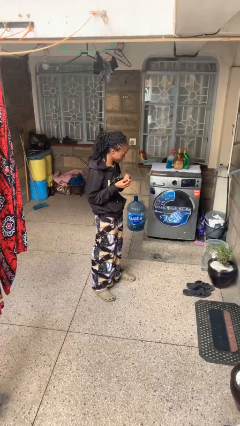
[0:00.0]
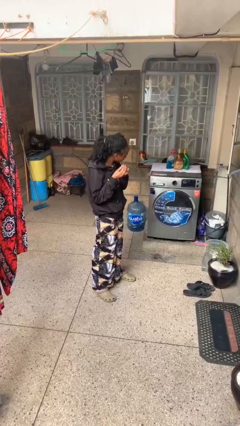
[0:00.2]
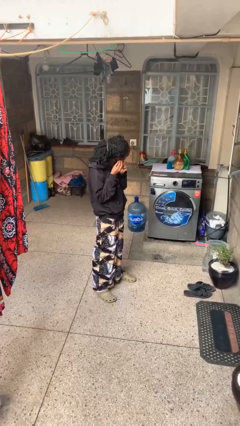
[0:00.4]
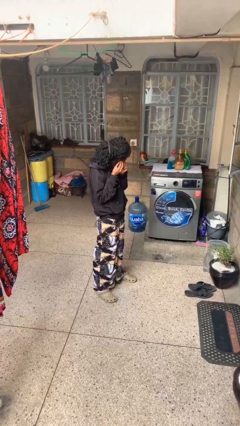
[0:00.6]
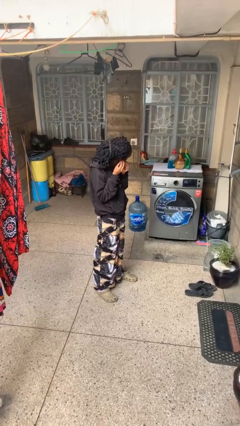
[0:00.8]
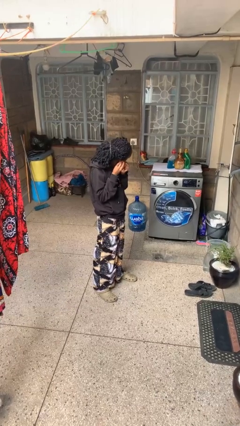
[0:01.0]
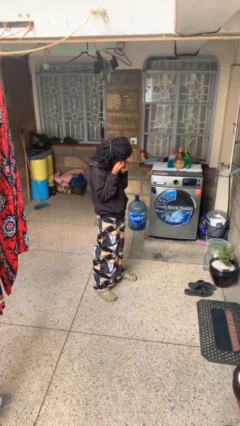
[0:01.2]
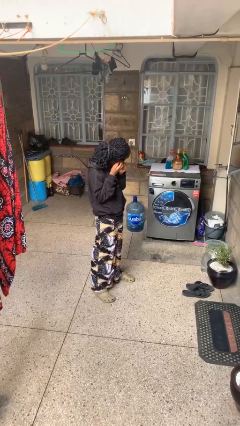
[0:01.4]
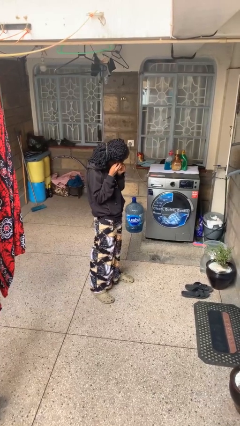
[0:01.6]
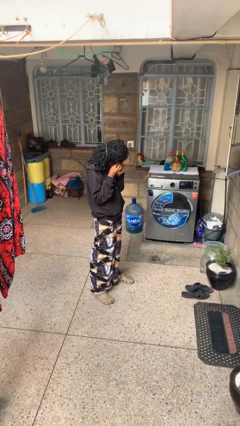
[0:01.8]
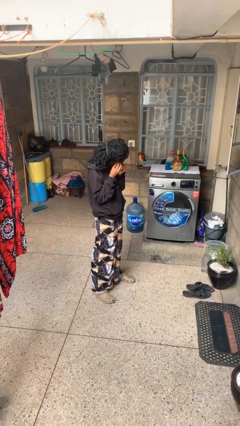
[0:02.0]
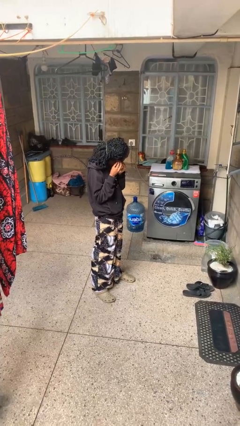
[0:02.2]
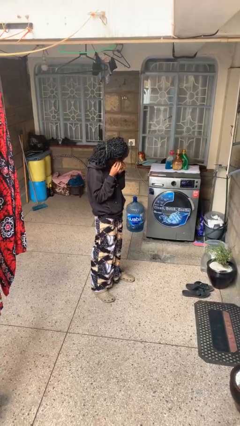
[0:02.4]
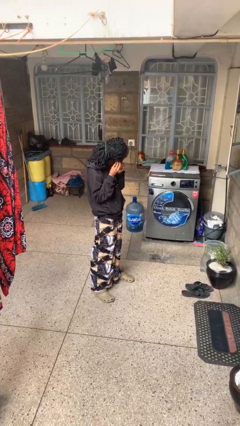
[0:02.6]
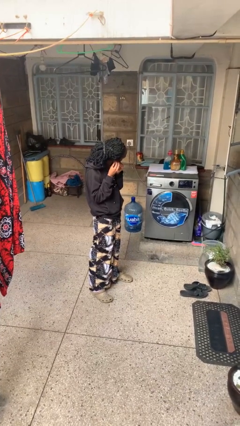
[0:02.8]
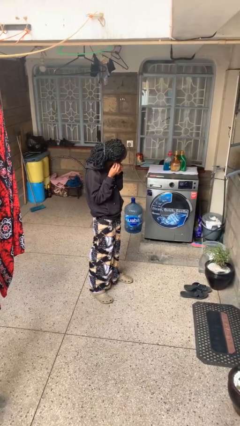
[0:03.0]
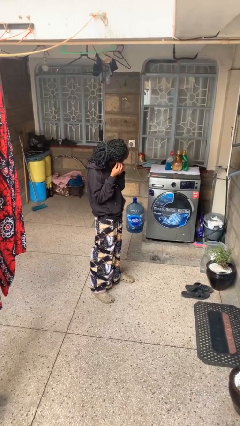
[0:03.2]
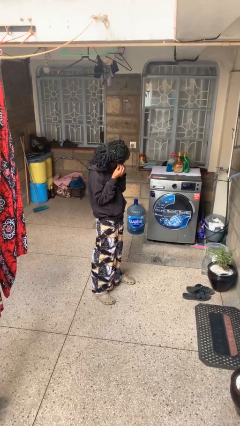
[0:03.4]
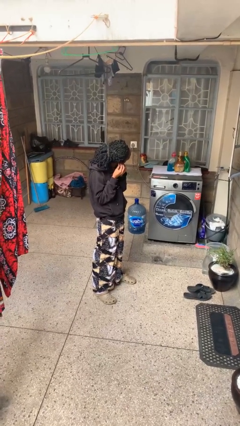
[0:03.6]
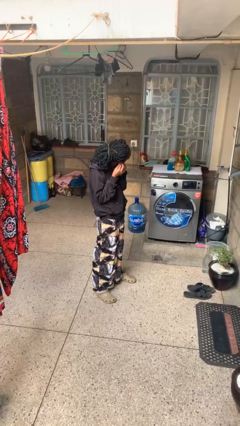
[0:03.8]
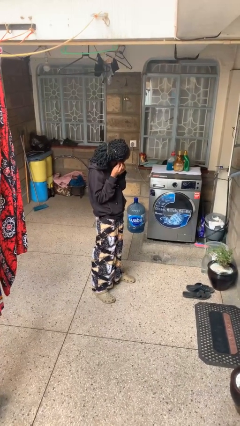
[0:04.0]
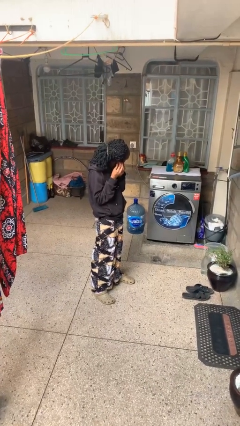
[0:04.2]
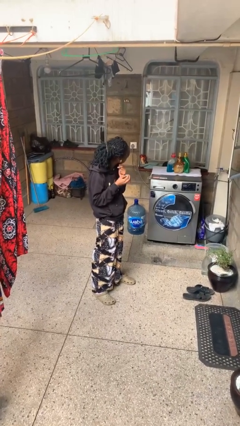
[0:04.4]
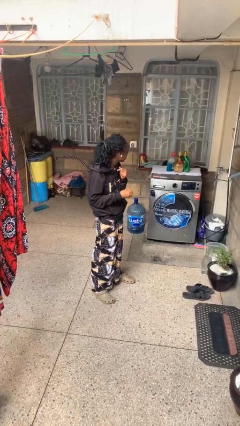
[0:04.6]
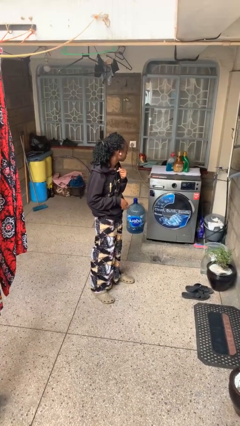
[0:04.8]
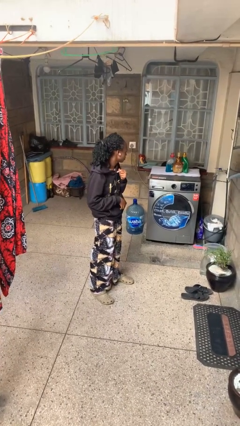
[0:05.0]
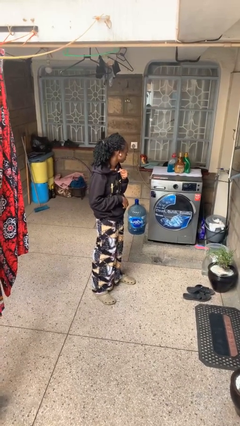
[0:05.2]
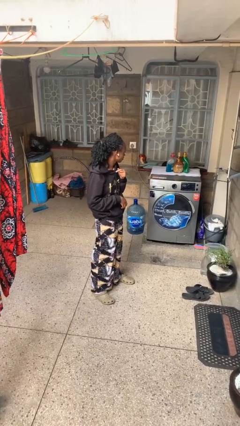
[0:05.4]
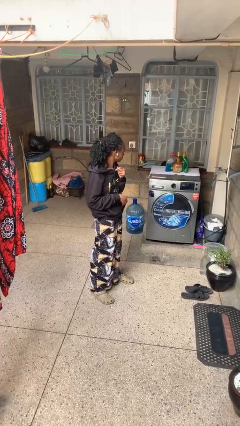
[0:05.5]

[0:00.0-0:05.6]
person puts on earrings

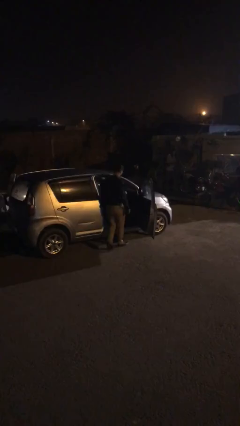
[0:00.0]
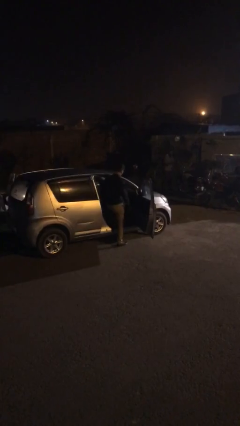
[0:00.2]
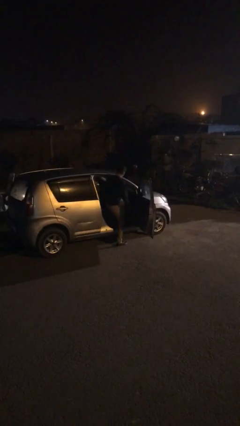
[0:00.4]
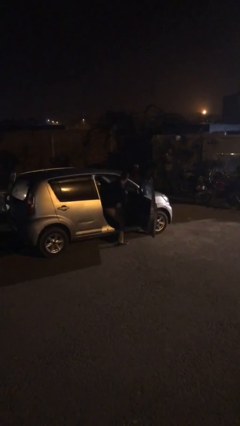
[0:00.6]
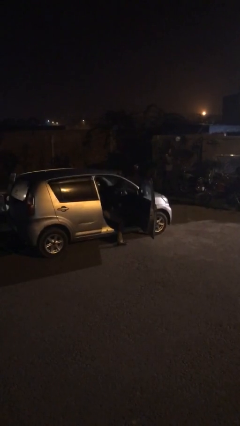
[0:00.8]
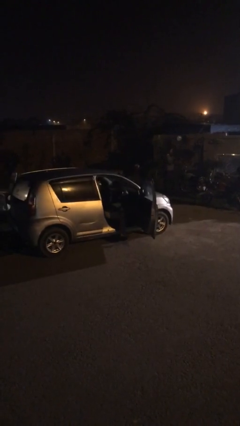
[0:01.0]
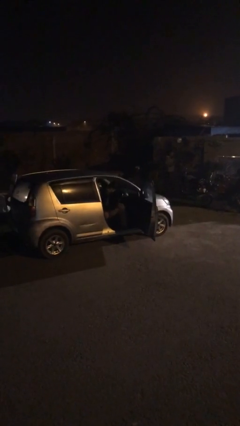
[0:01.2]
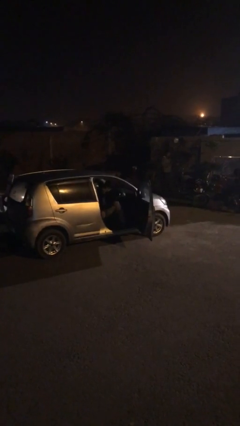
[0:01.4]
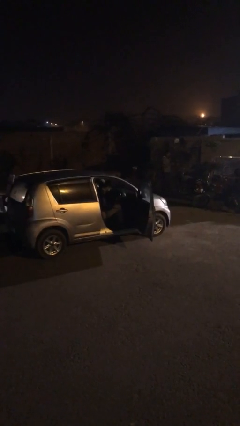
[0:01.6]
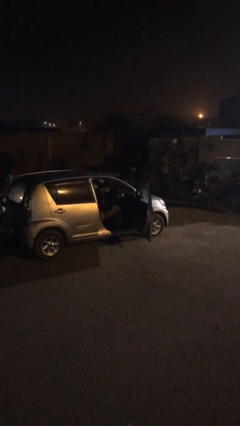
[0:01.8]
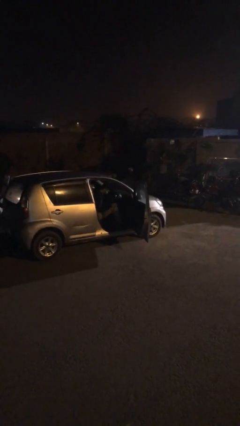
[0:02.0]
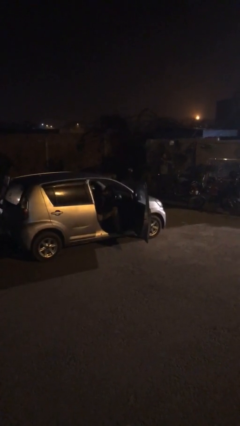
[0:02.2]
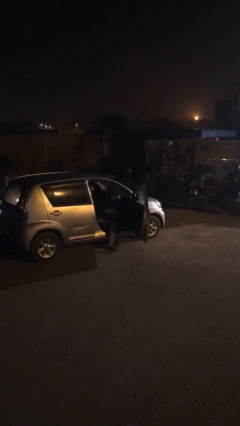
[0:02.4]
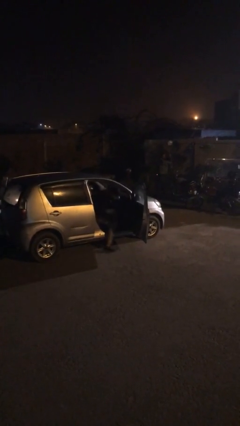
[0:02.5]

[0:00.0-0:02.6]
person enters car

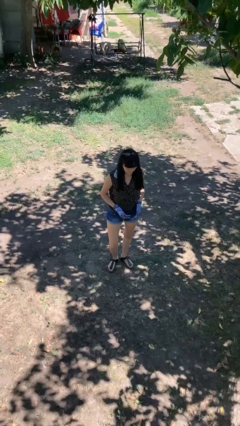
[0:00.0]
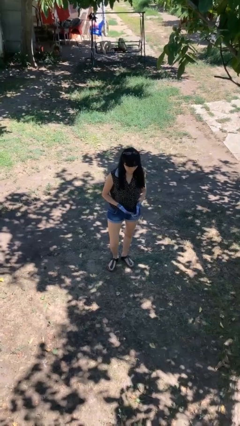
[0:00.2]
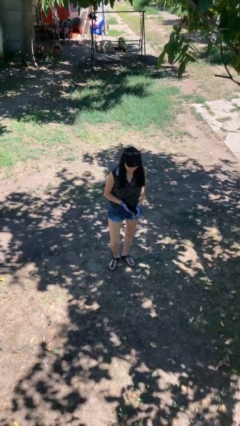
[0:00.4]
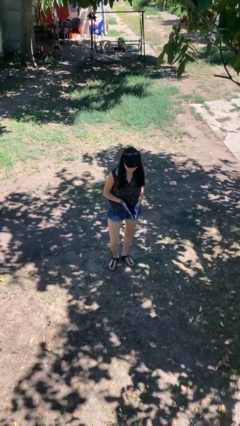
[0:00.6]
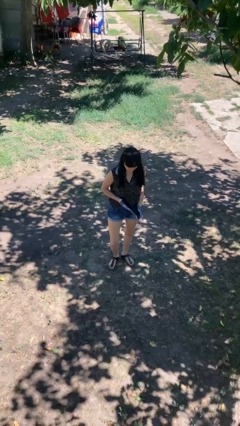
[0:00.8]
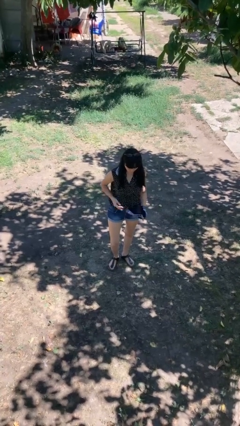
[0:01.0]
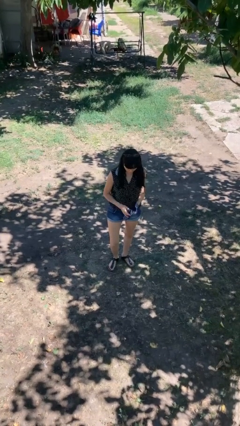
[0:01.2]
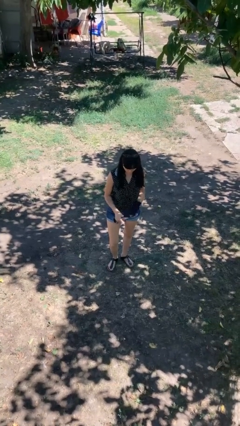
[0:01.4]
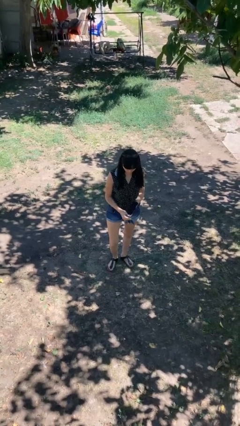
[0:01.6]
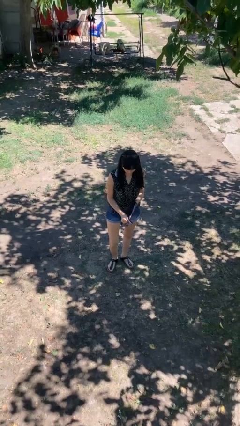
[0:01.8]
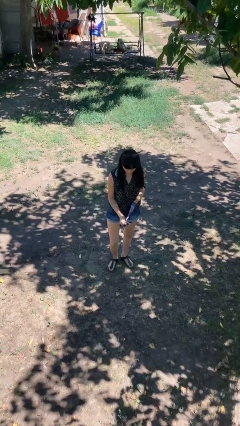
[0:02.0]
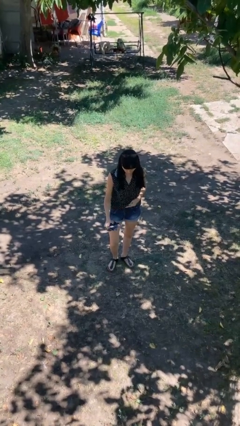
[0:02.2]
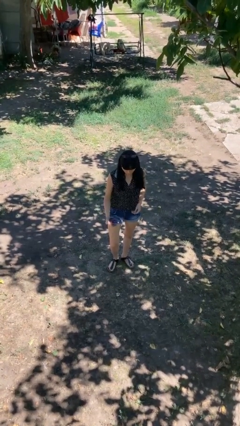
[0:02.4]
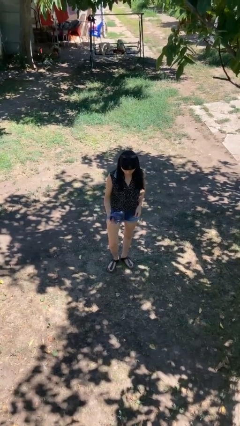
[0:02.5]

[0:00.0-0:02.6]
person takes off gloves

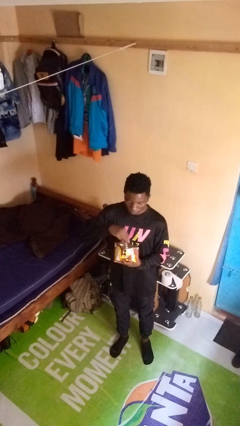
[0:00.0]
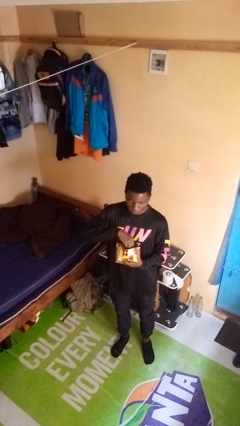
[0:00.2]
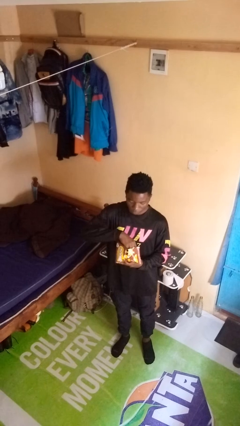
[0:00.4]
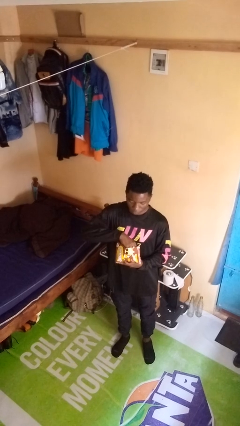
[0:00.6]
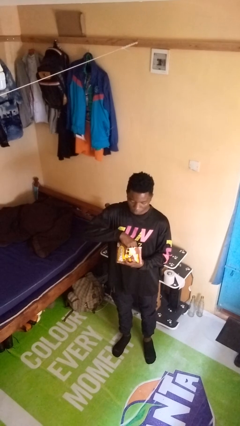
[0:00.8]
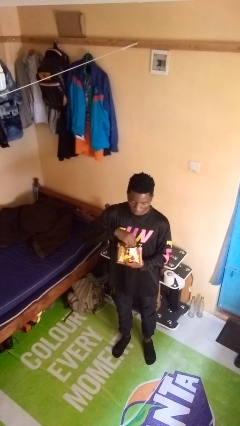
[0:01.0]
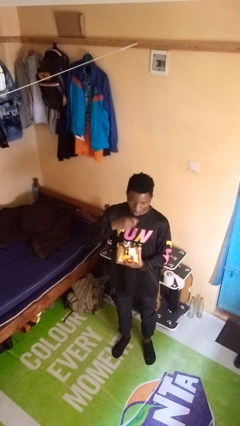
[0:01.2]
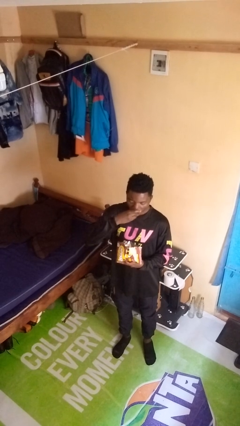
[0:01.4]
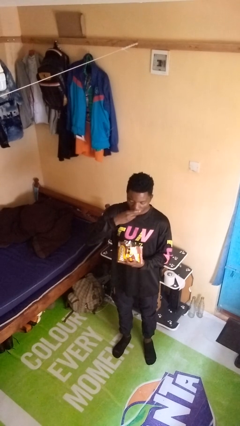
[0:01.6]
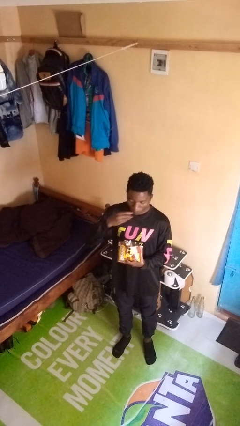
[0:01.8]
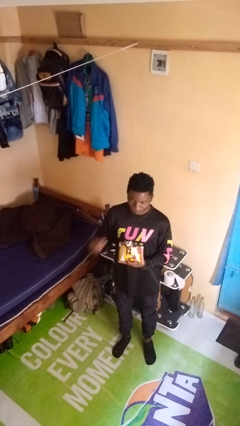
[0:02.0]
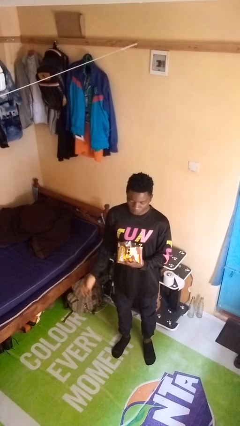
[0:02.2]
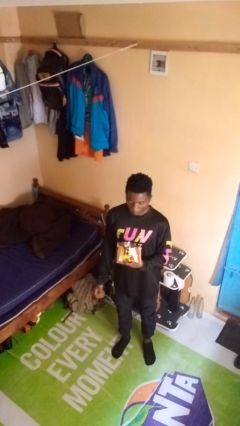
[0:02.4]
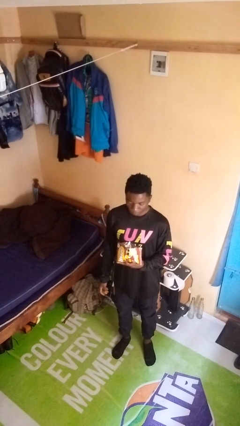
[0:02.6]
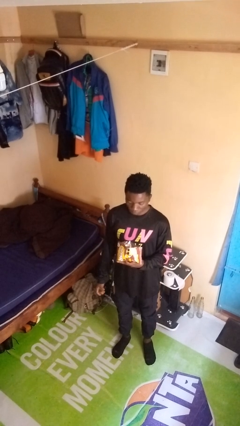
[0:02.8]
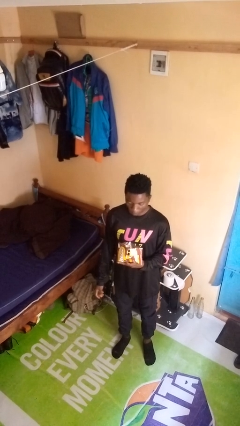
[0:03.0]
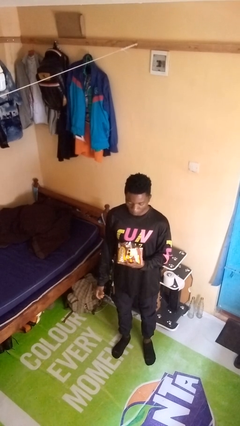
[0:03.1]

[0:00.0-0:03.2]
person eats snack from bag

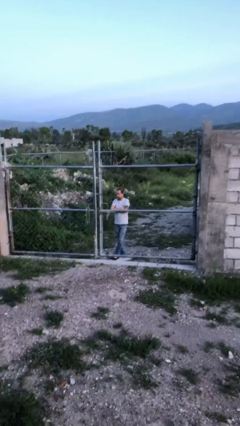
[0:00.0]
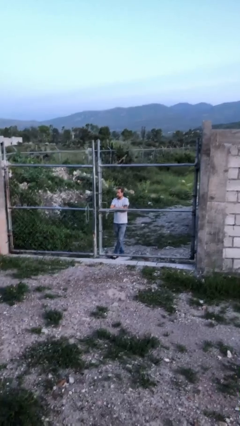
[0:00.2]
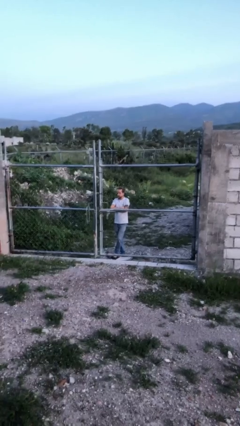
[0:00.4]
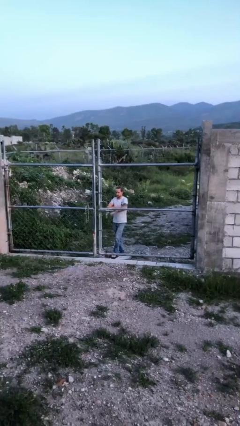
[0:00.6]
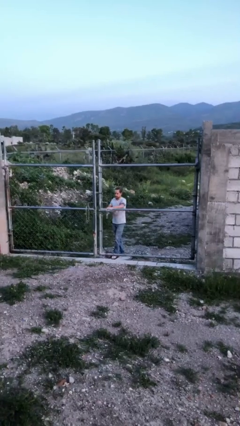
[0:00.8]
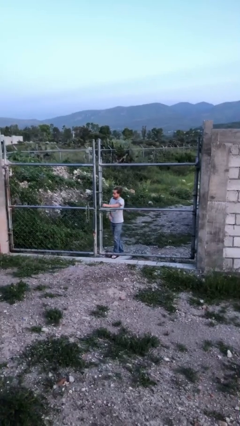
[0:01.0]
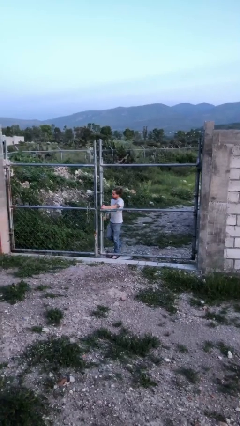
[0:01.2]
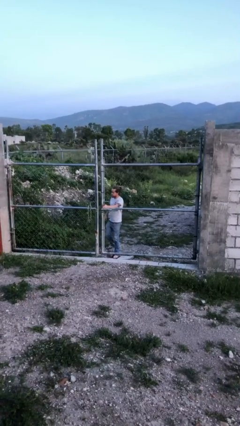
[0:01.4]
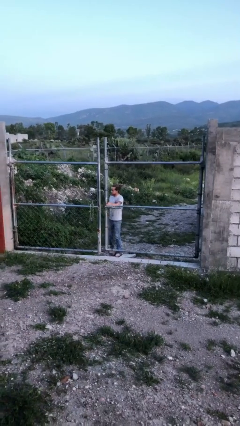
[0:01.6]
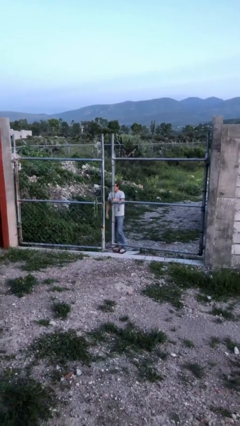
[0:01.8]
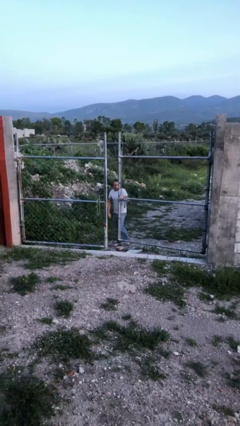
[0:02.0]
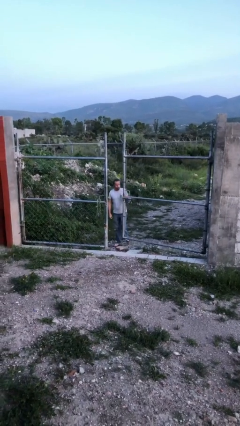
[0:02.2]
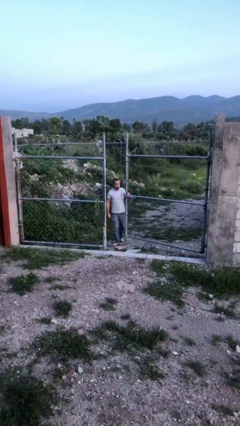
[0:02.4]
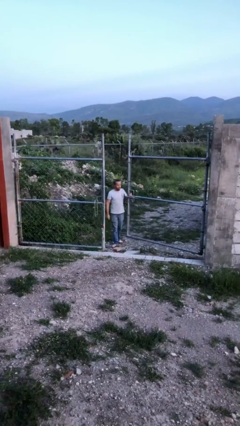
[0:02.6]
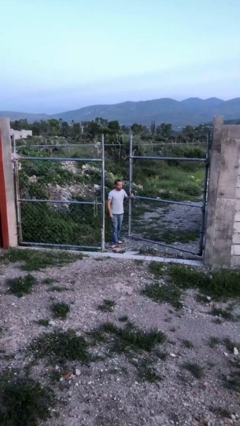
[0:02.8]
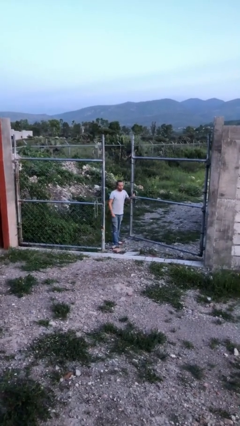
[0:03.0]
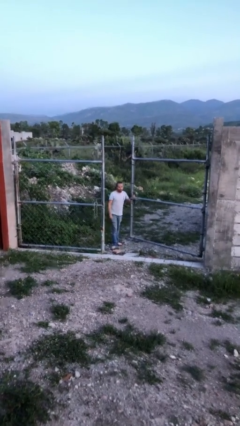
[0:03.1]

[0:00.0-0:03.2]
person opens gate

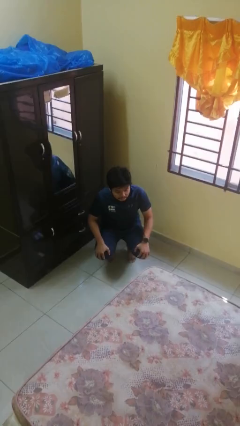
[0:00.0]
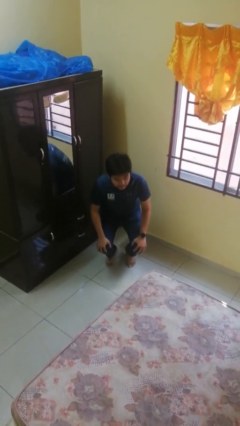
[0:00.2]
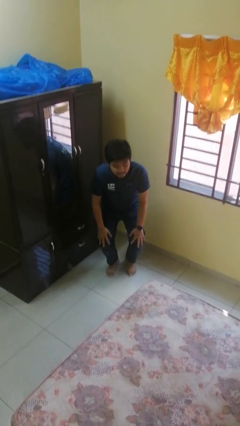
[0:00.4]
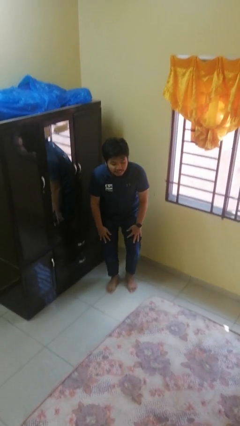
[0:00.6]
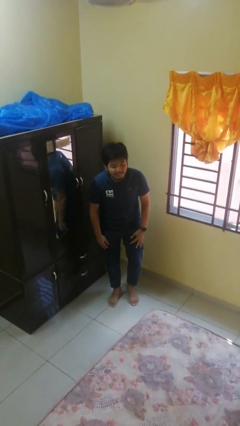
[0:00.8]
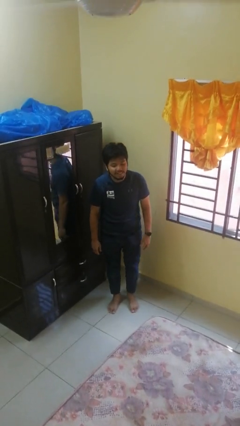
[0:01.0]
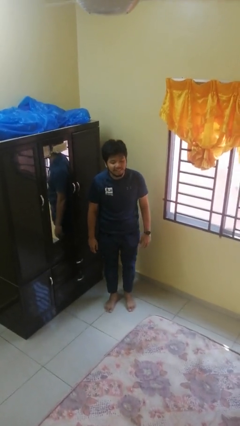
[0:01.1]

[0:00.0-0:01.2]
person stands up
